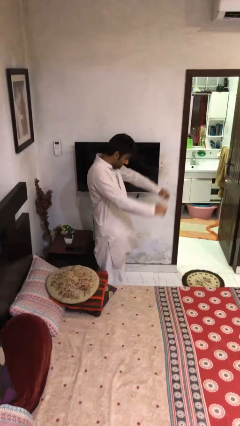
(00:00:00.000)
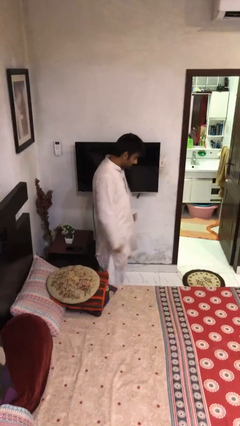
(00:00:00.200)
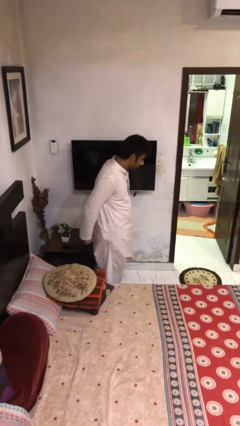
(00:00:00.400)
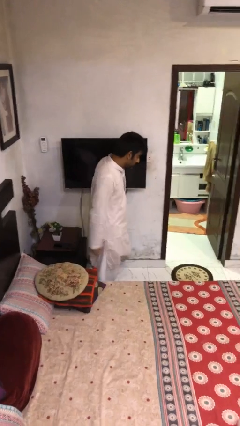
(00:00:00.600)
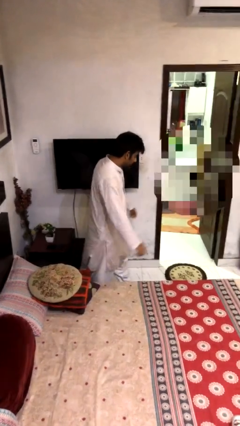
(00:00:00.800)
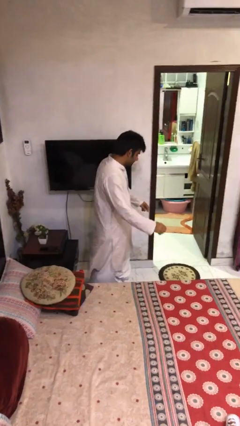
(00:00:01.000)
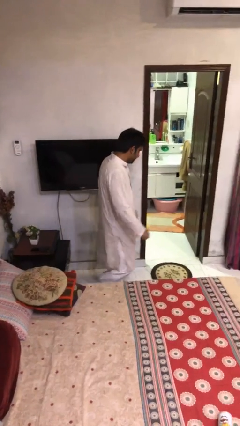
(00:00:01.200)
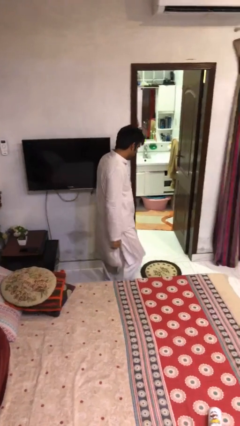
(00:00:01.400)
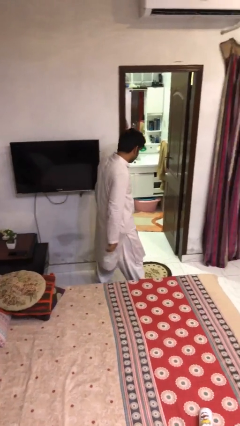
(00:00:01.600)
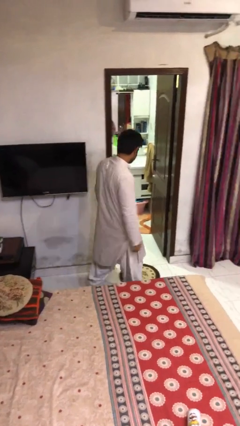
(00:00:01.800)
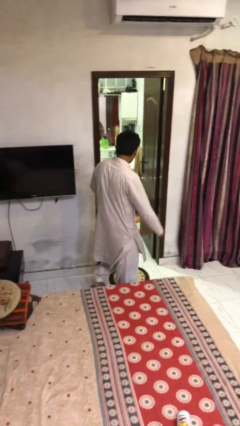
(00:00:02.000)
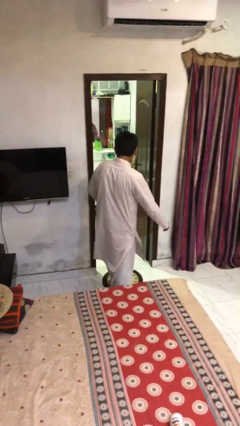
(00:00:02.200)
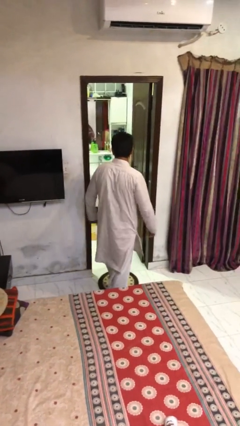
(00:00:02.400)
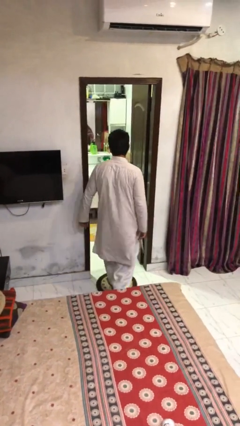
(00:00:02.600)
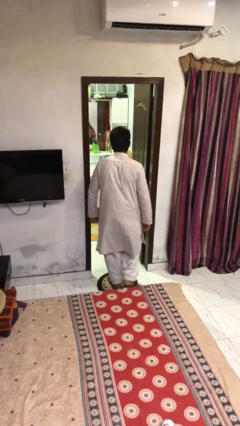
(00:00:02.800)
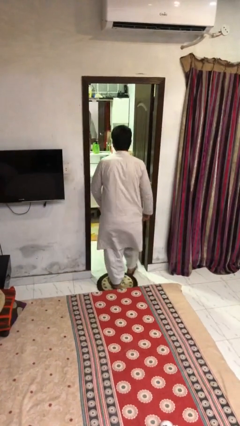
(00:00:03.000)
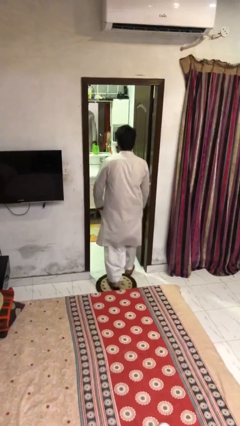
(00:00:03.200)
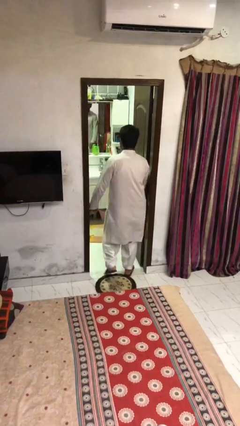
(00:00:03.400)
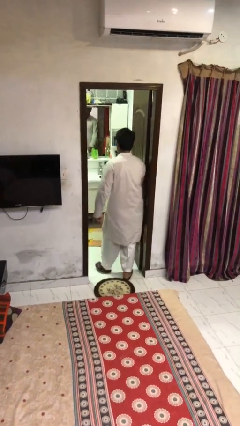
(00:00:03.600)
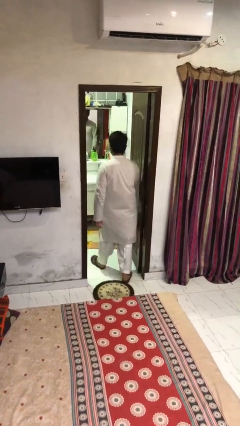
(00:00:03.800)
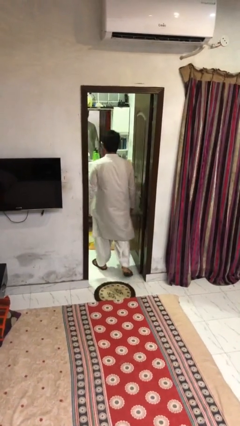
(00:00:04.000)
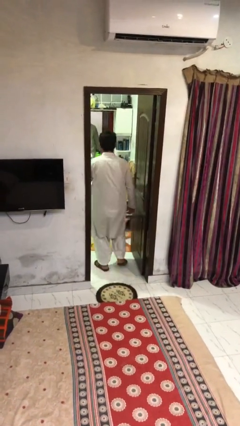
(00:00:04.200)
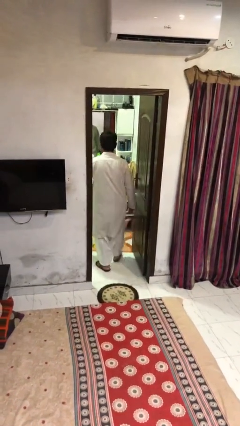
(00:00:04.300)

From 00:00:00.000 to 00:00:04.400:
person exits scene through structure

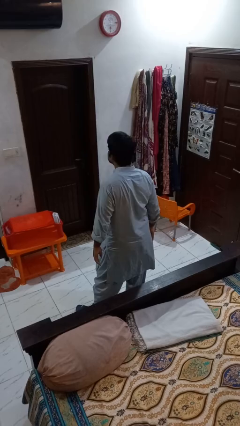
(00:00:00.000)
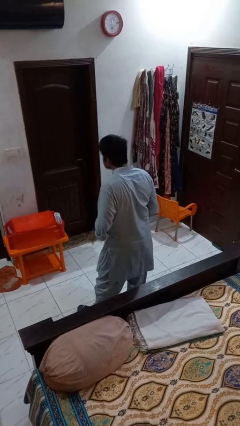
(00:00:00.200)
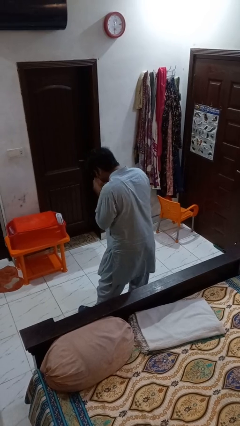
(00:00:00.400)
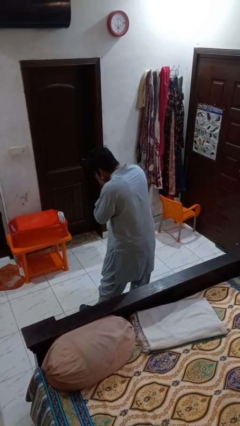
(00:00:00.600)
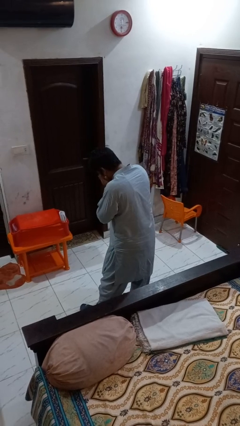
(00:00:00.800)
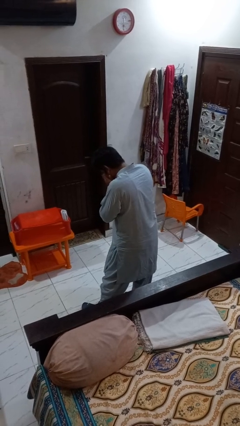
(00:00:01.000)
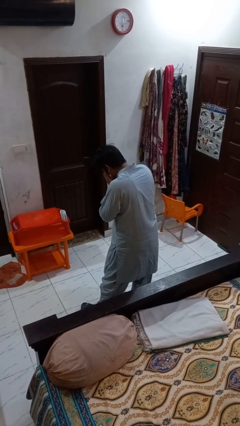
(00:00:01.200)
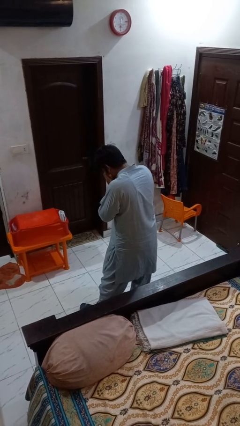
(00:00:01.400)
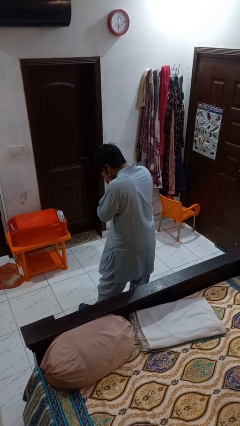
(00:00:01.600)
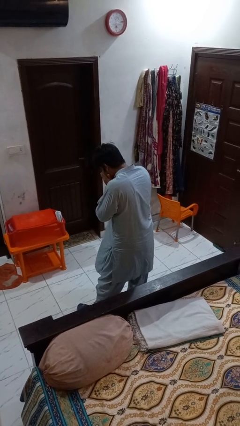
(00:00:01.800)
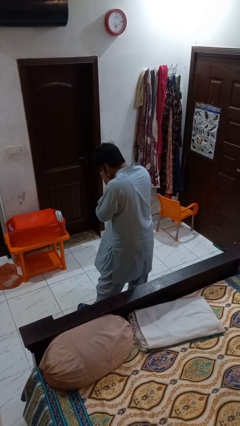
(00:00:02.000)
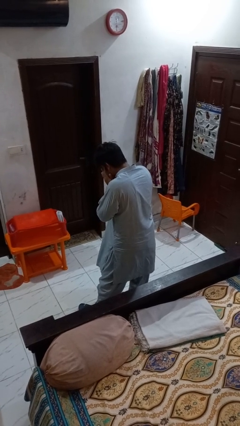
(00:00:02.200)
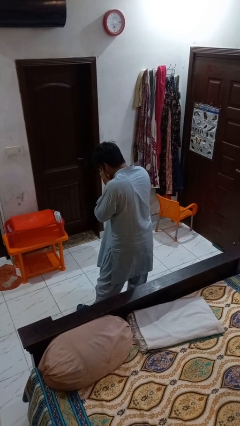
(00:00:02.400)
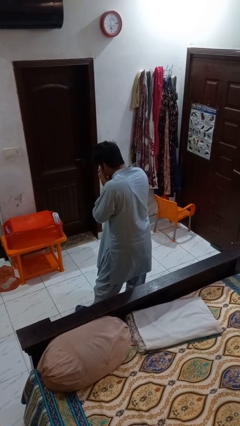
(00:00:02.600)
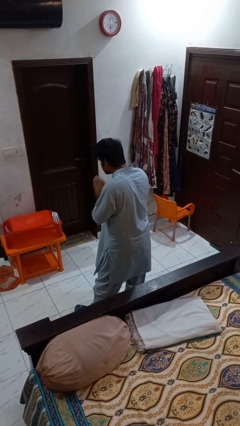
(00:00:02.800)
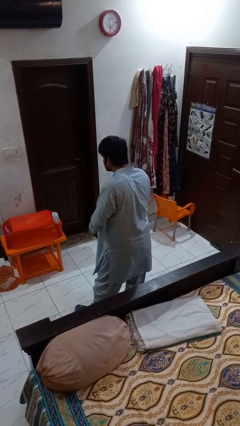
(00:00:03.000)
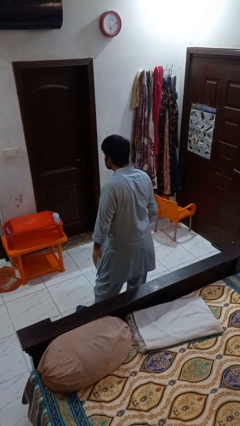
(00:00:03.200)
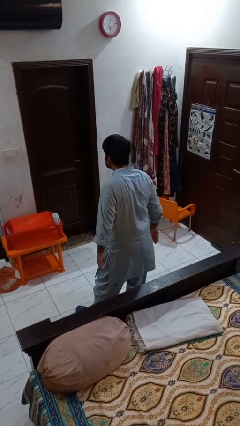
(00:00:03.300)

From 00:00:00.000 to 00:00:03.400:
person sneezes into hand

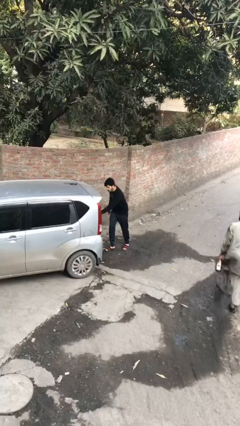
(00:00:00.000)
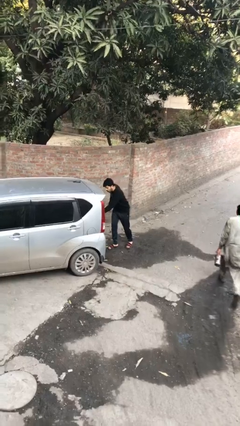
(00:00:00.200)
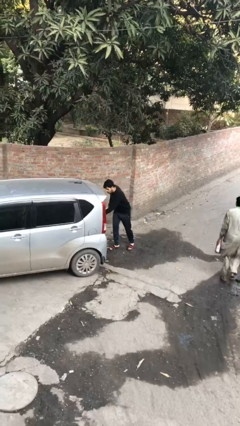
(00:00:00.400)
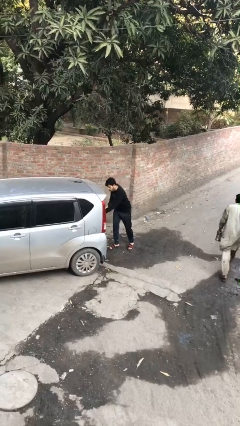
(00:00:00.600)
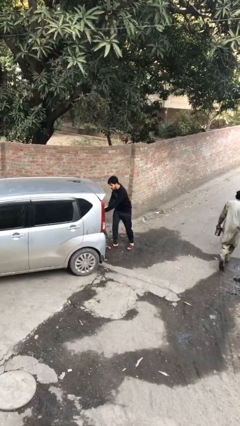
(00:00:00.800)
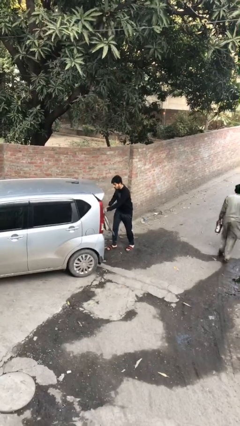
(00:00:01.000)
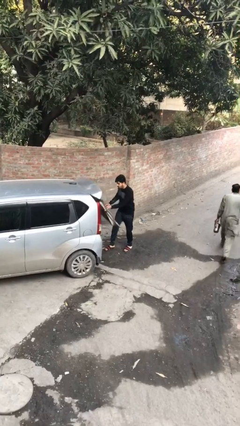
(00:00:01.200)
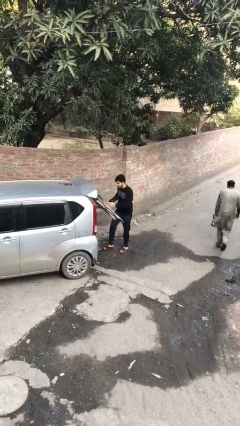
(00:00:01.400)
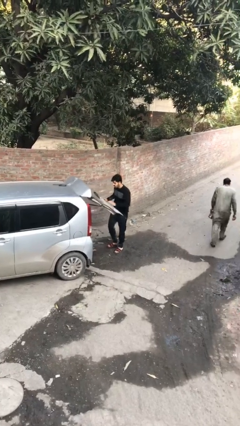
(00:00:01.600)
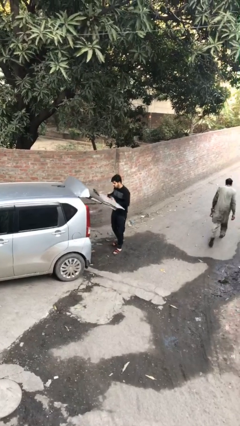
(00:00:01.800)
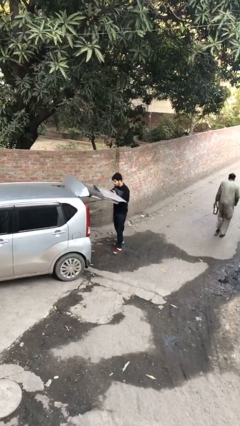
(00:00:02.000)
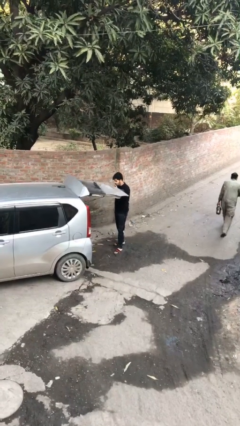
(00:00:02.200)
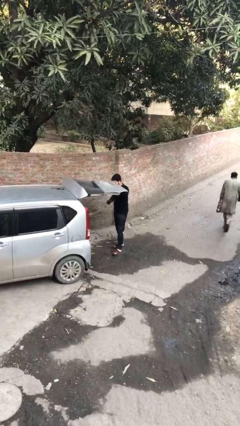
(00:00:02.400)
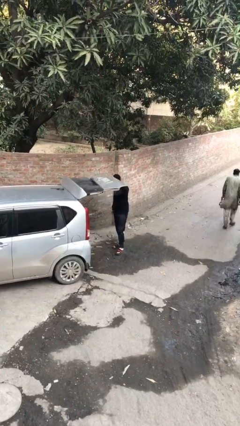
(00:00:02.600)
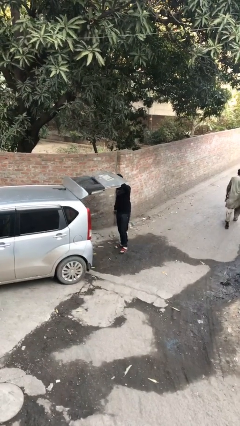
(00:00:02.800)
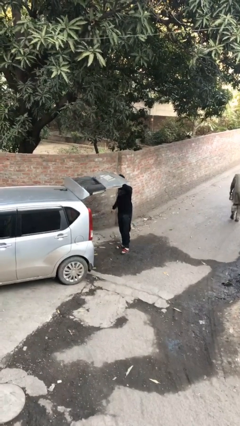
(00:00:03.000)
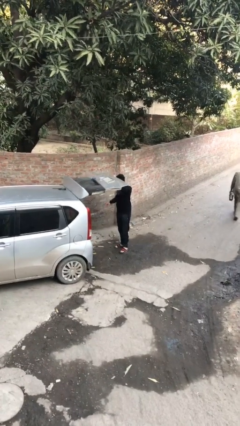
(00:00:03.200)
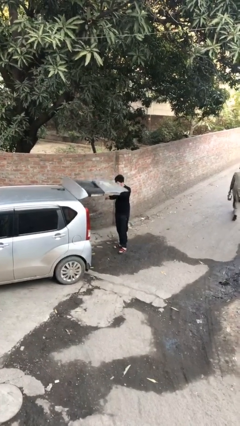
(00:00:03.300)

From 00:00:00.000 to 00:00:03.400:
person opens car trunk

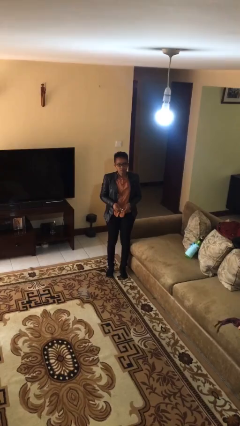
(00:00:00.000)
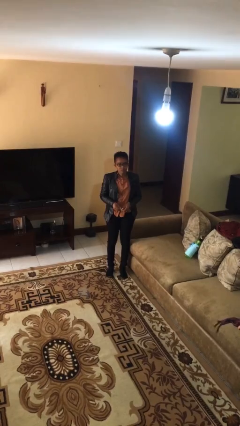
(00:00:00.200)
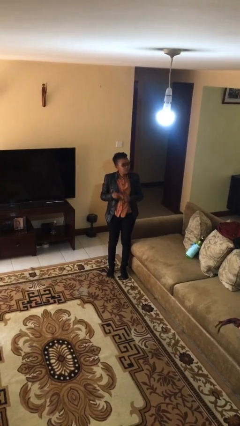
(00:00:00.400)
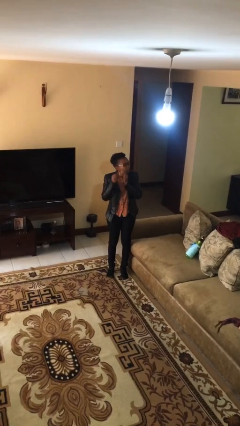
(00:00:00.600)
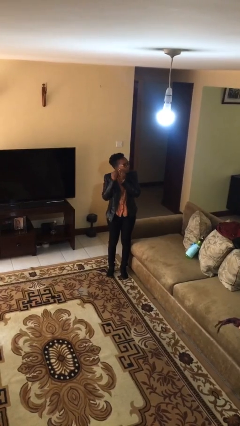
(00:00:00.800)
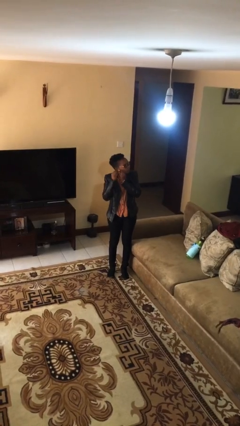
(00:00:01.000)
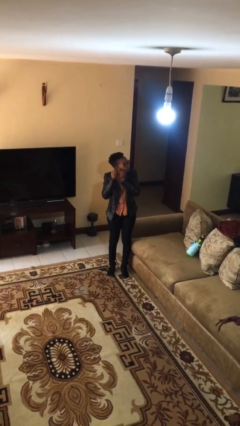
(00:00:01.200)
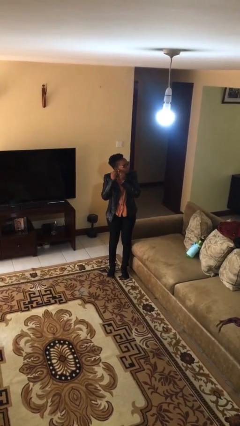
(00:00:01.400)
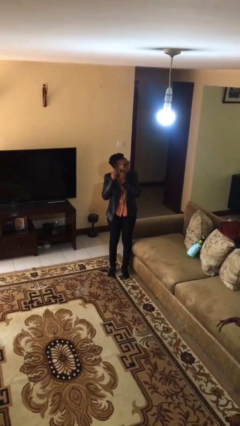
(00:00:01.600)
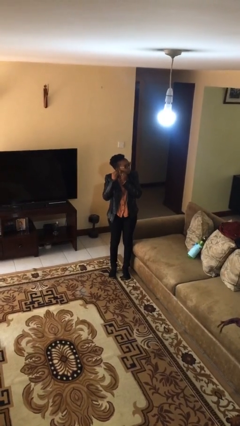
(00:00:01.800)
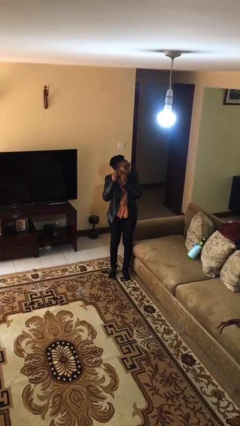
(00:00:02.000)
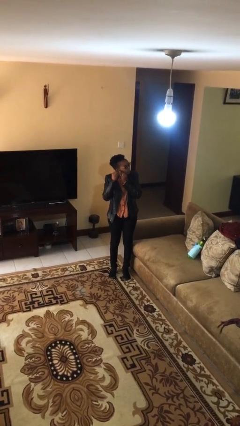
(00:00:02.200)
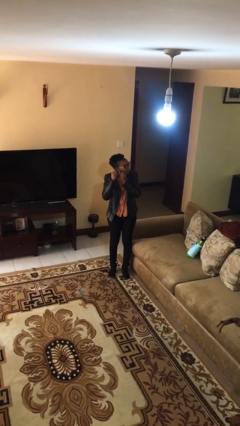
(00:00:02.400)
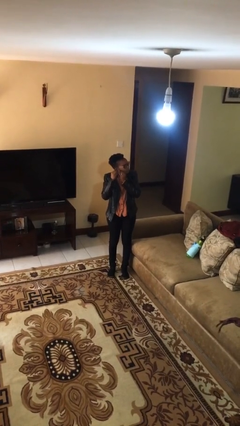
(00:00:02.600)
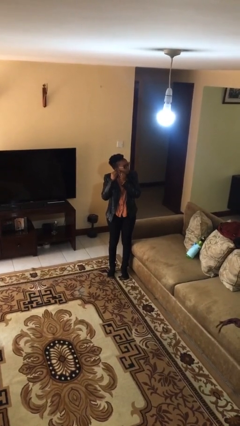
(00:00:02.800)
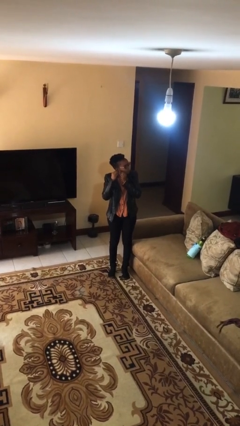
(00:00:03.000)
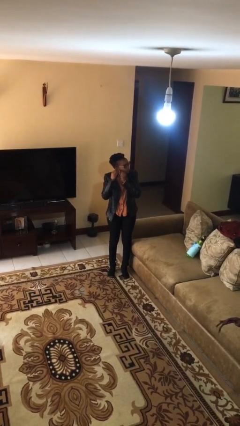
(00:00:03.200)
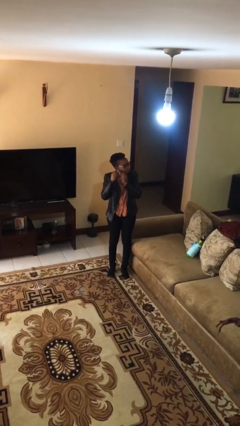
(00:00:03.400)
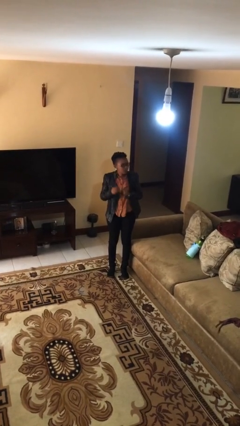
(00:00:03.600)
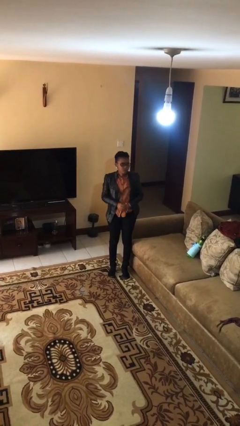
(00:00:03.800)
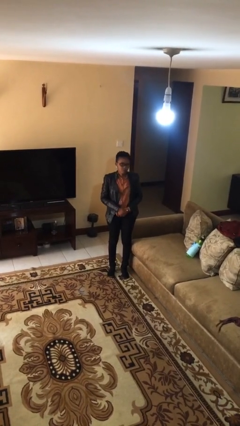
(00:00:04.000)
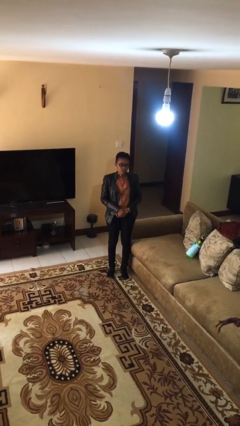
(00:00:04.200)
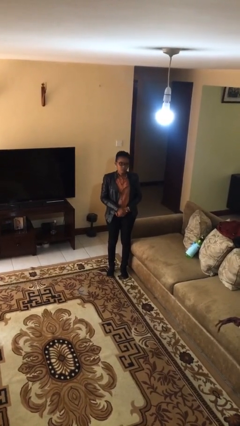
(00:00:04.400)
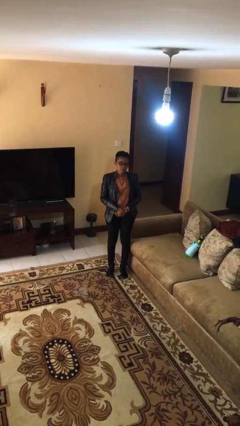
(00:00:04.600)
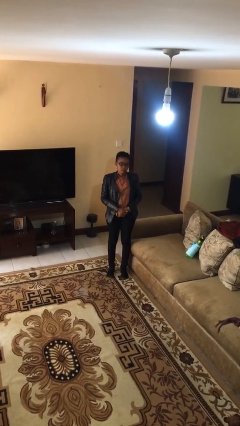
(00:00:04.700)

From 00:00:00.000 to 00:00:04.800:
person puts on earrings

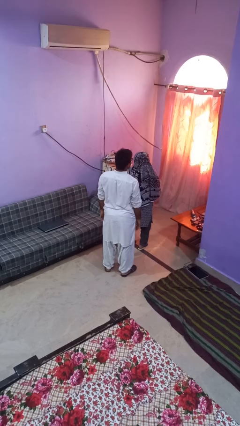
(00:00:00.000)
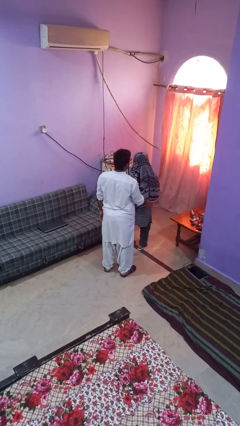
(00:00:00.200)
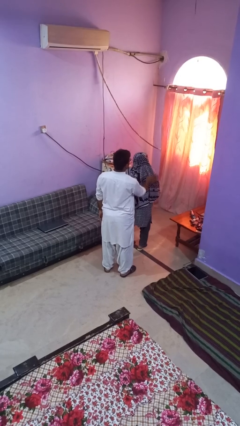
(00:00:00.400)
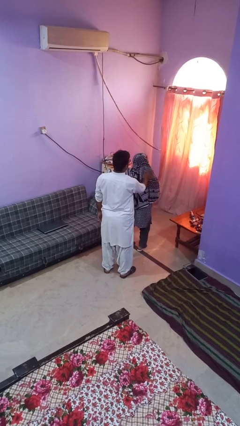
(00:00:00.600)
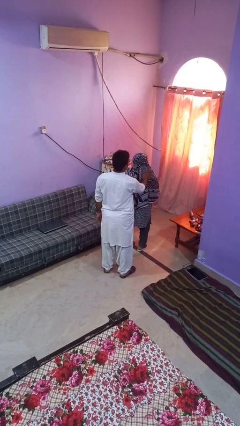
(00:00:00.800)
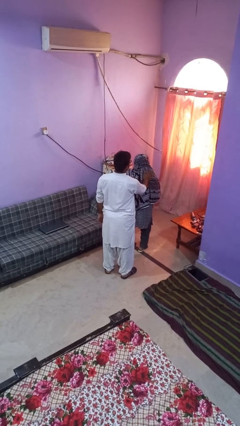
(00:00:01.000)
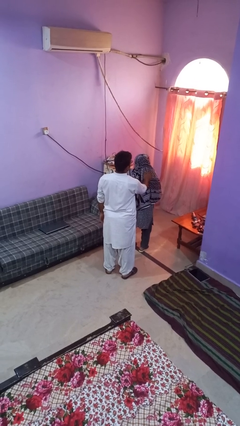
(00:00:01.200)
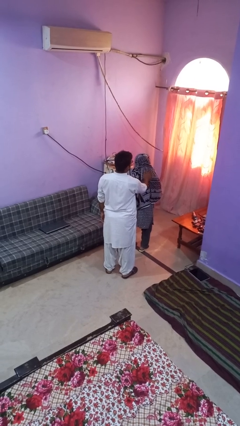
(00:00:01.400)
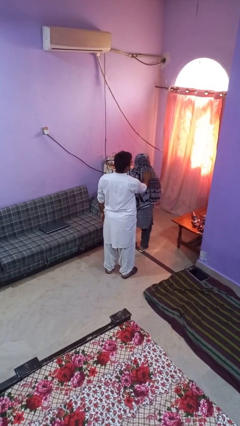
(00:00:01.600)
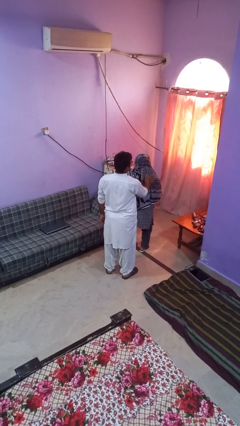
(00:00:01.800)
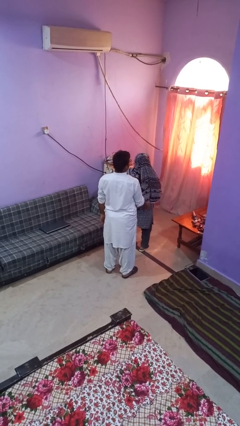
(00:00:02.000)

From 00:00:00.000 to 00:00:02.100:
person touches back of person
